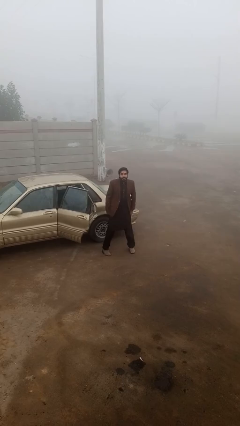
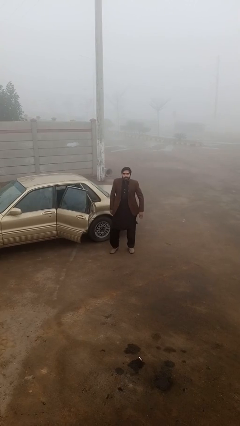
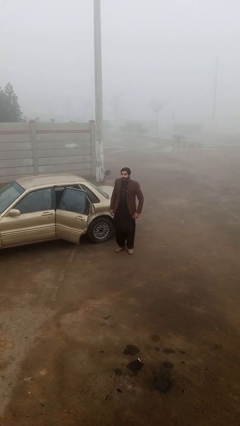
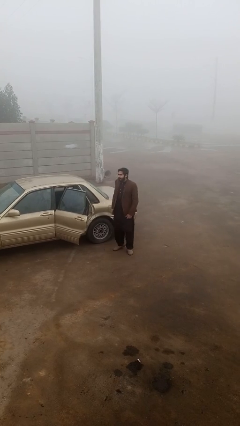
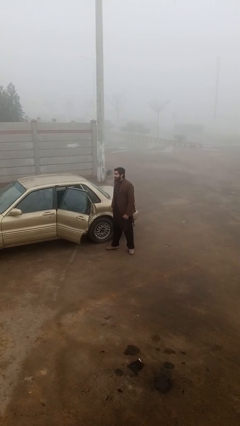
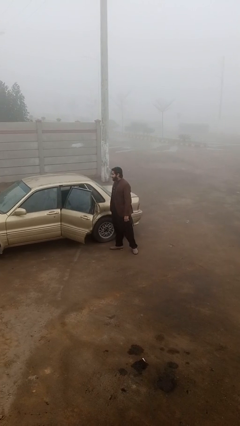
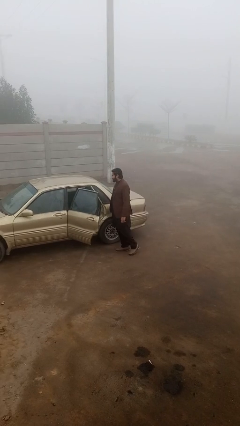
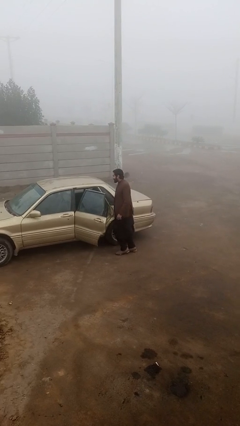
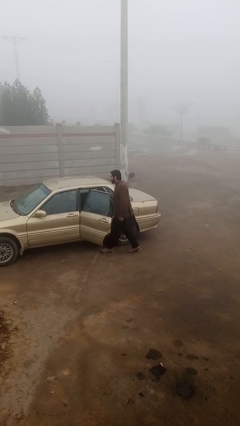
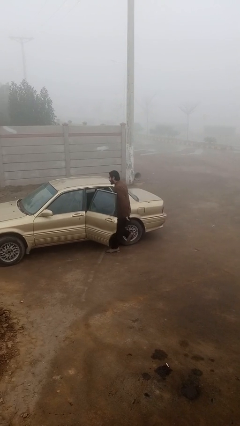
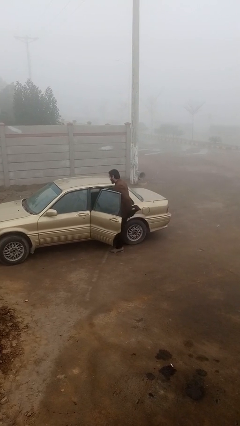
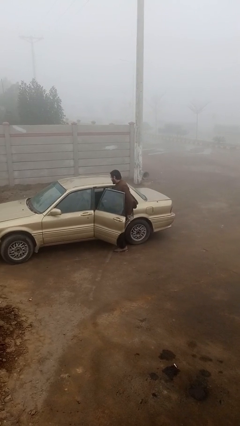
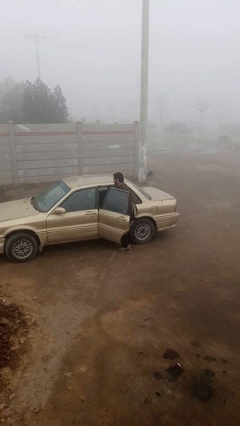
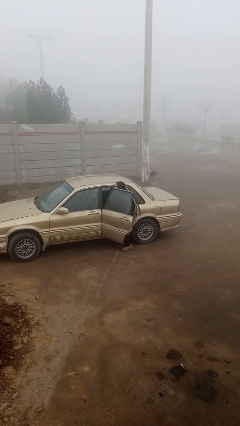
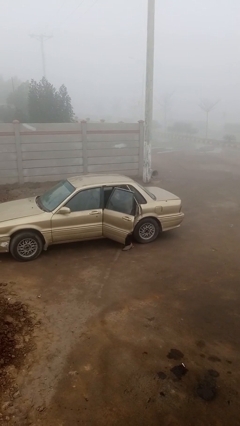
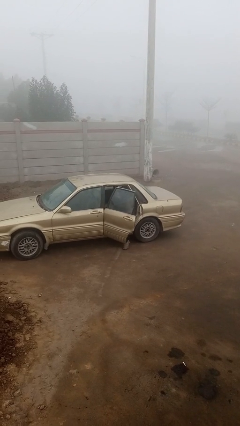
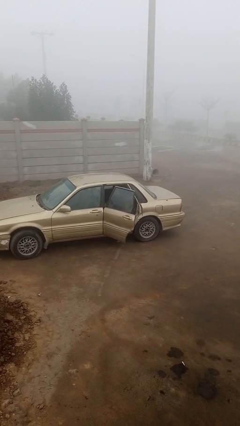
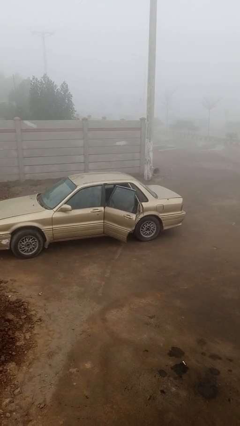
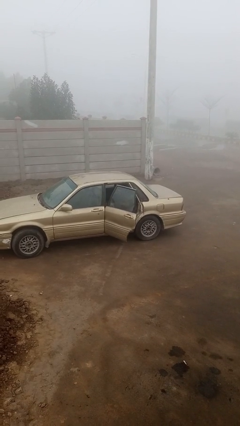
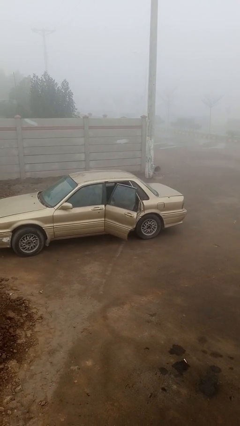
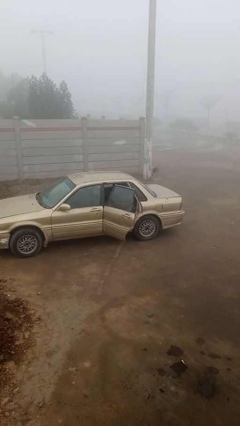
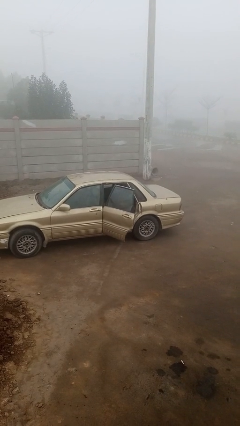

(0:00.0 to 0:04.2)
person enters car

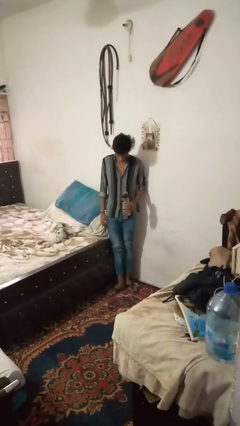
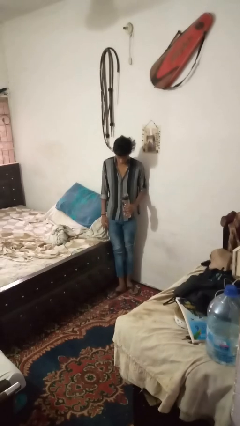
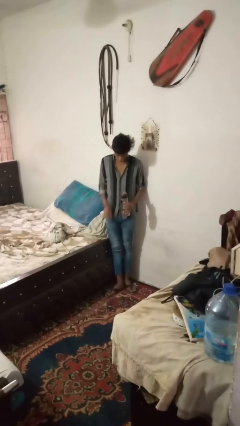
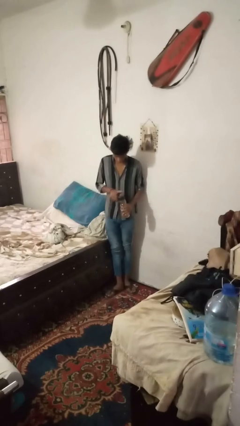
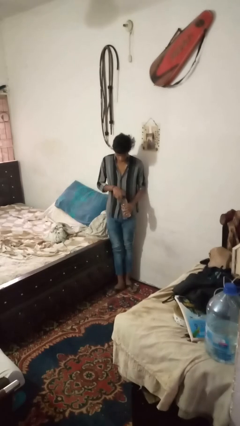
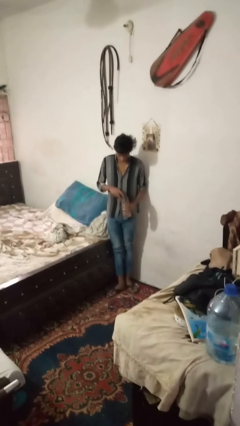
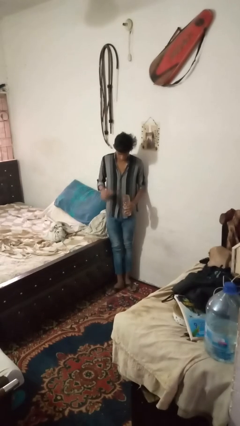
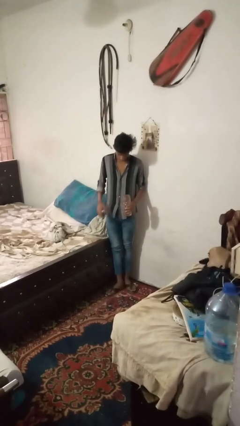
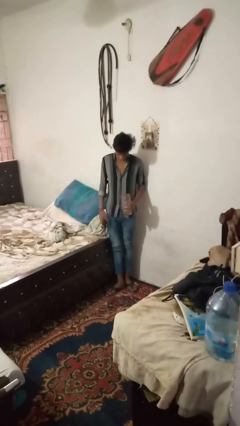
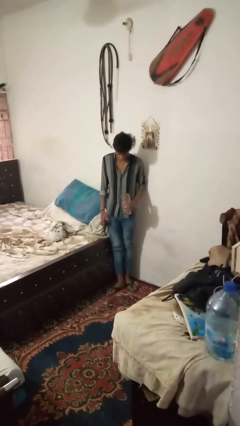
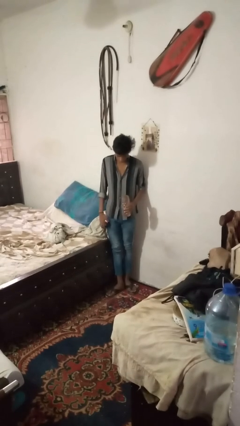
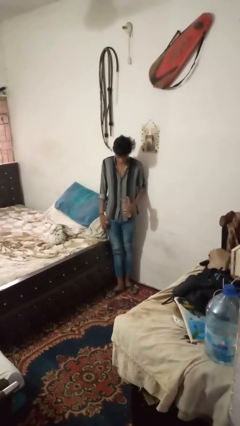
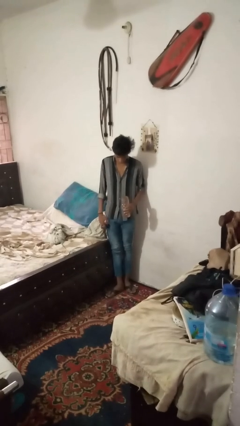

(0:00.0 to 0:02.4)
person unscrews lid from bottle

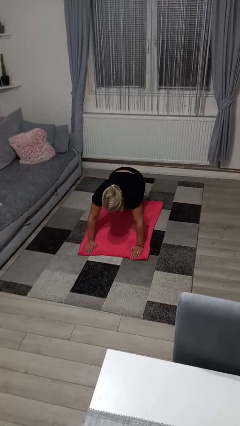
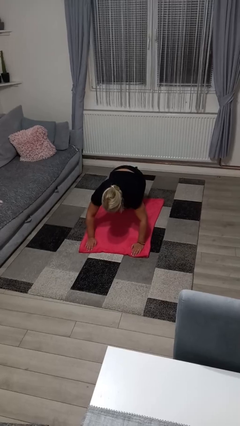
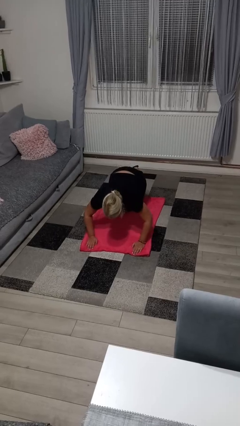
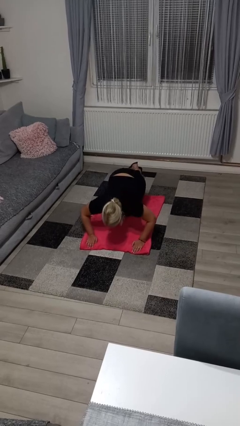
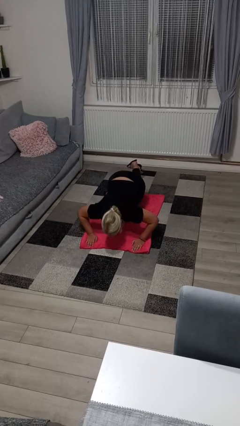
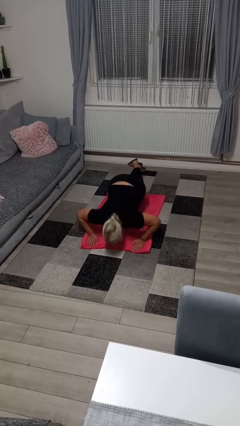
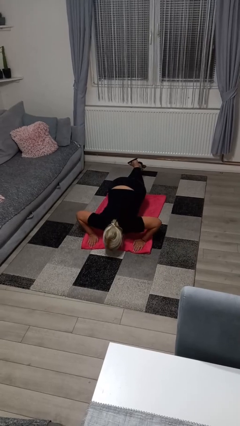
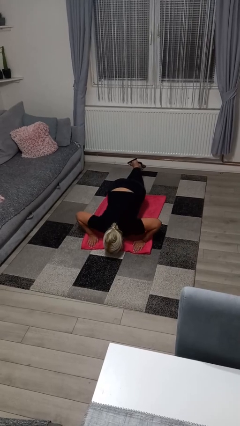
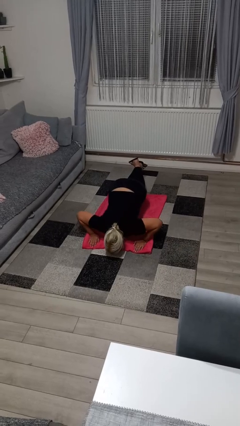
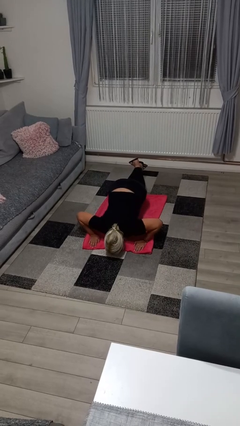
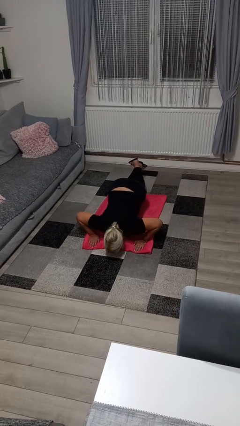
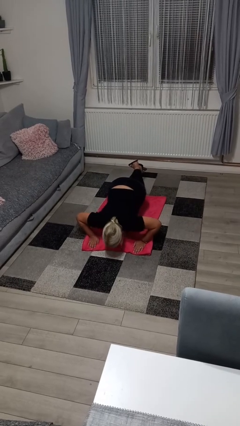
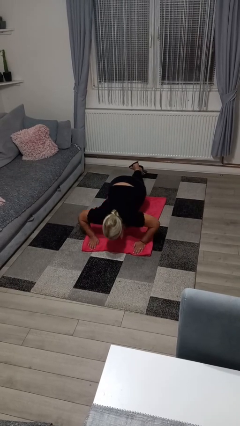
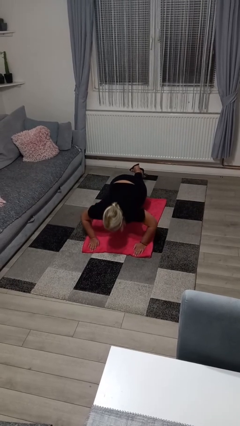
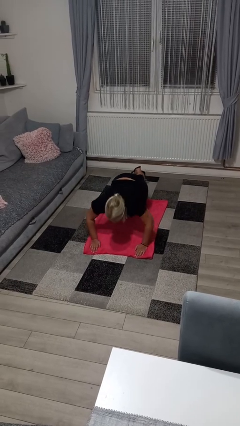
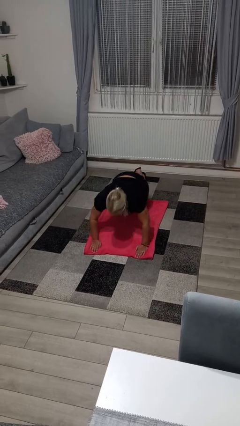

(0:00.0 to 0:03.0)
person exercises with pushup

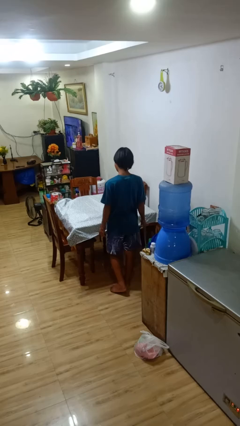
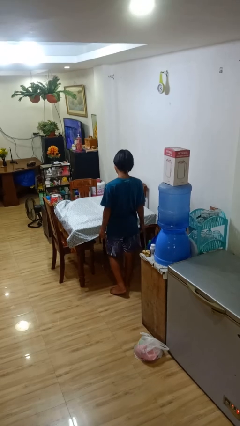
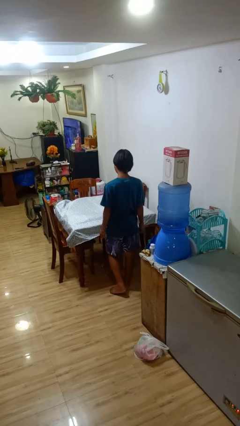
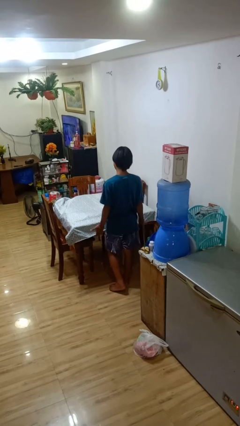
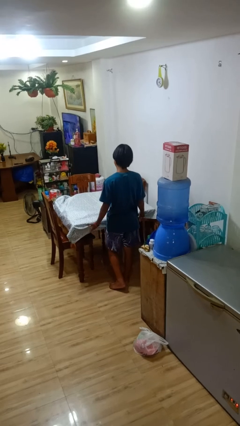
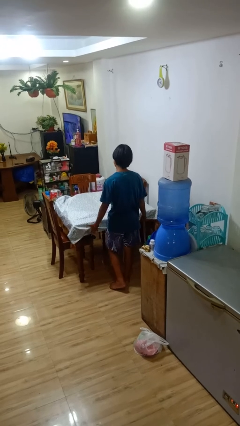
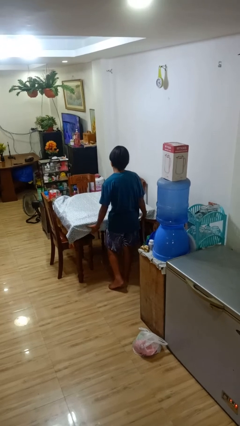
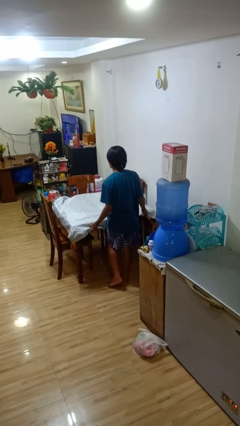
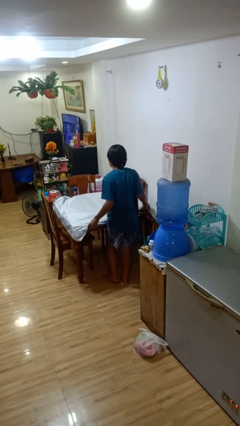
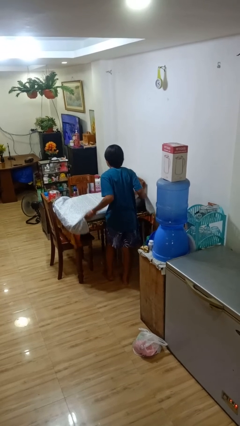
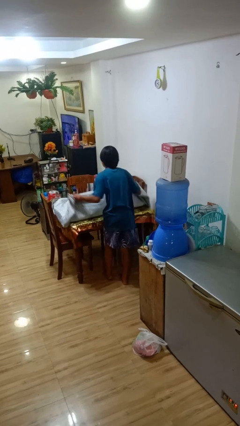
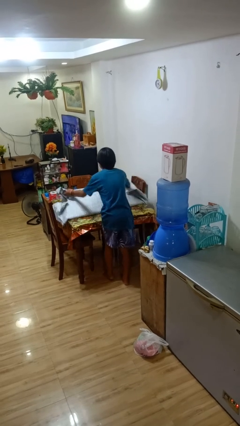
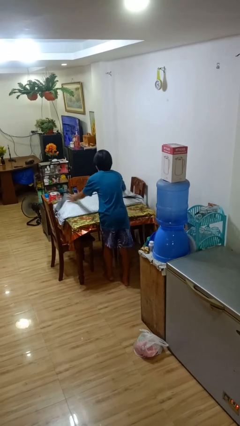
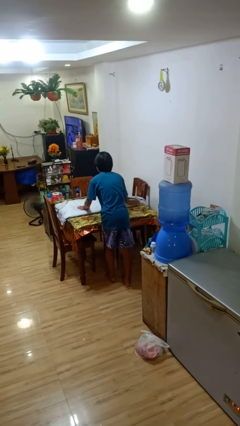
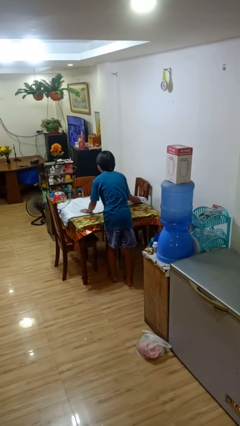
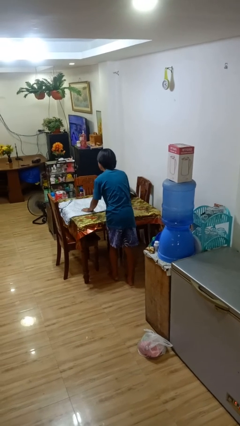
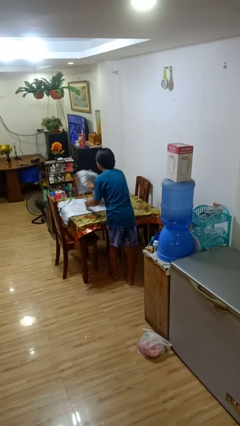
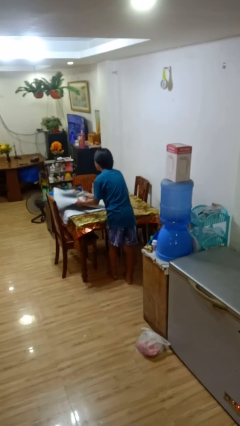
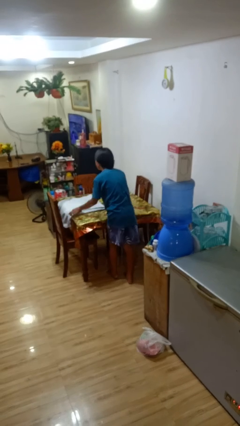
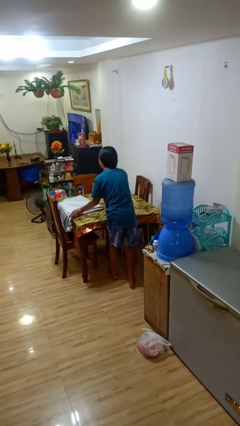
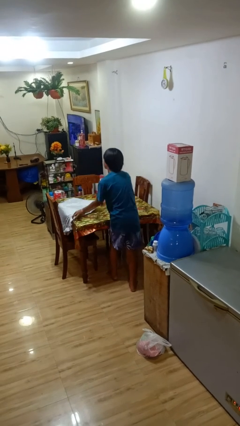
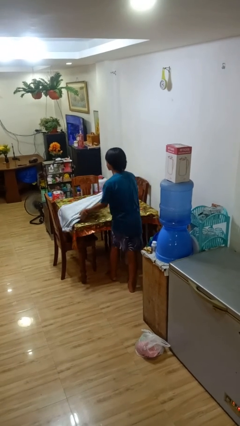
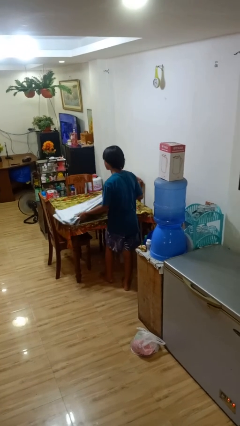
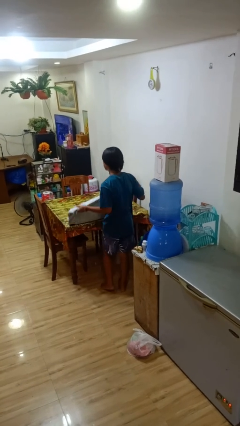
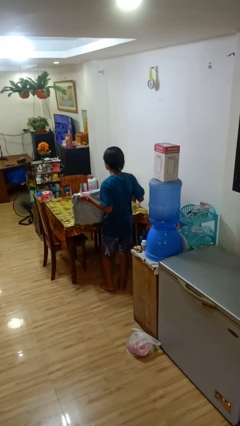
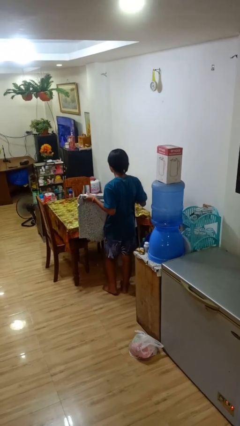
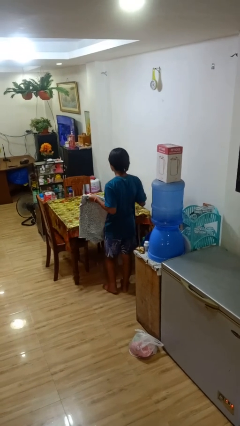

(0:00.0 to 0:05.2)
person folds tablecloth

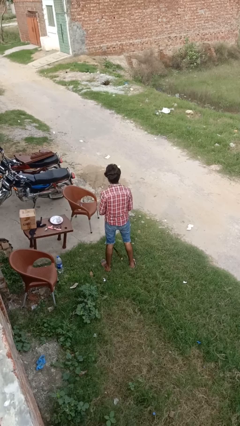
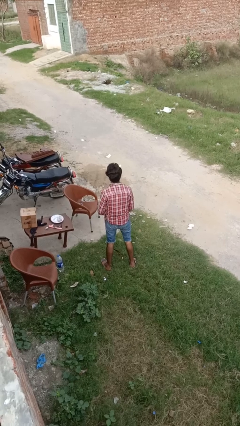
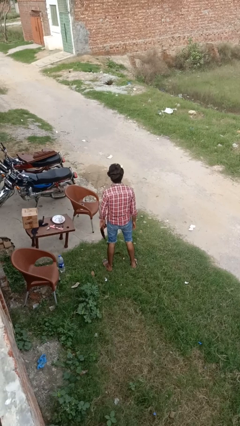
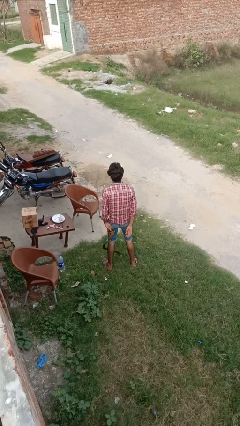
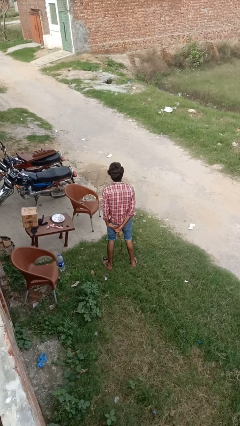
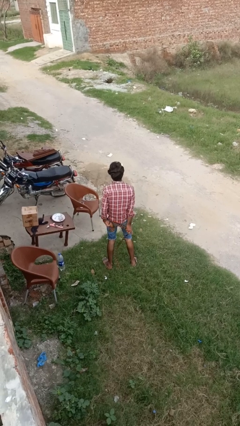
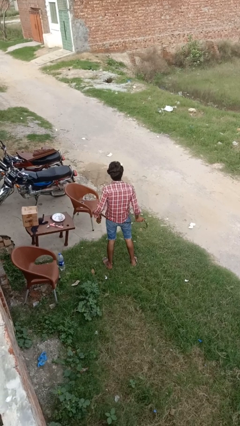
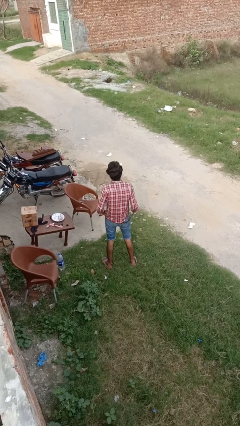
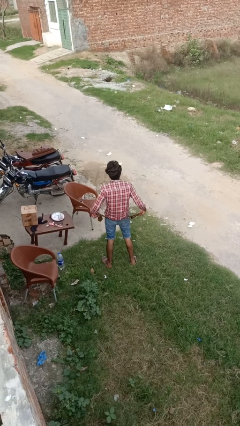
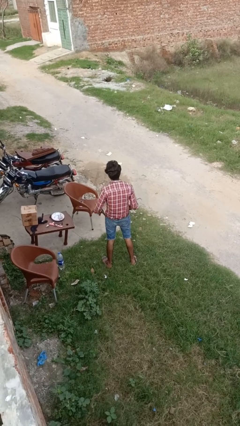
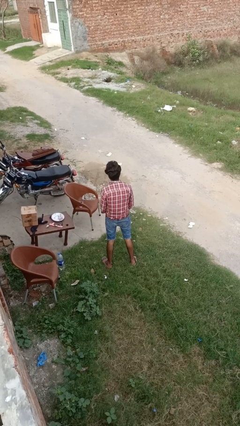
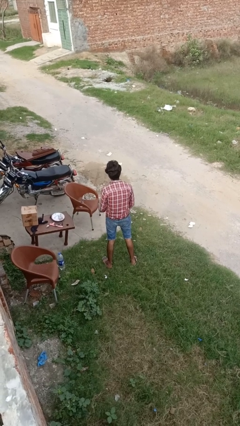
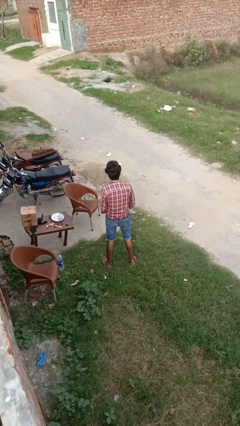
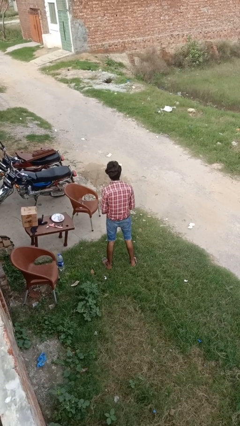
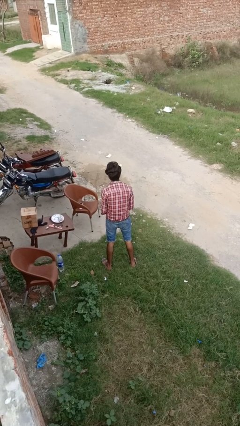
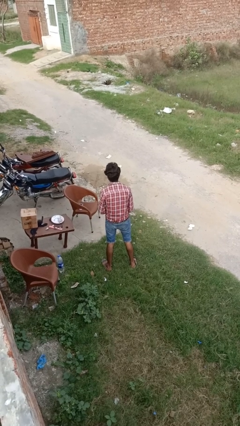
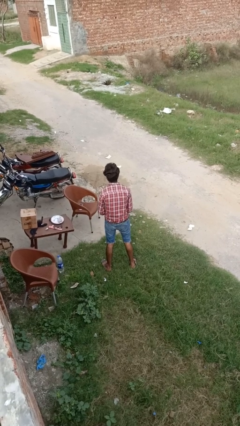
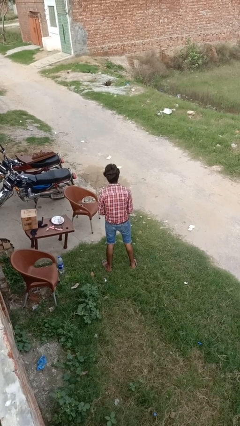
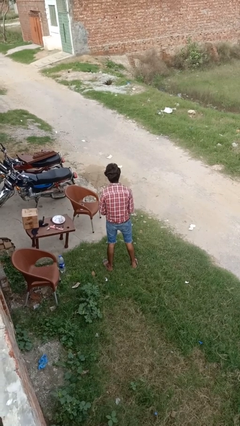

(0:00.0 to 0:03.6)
person puts on belt
